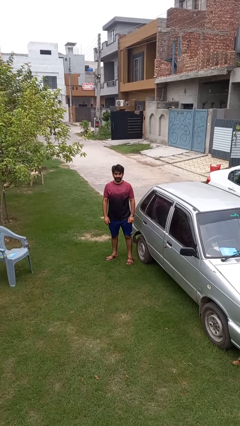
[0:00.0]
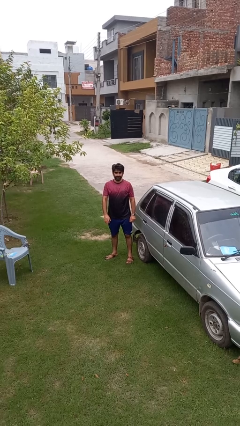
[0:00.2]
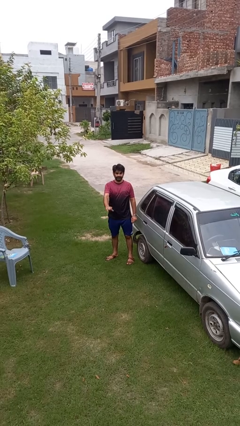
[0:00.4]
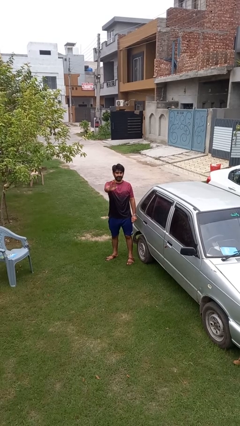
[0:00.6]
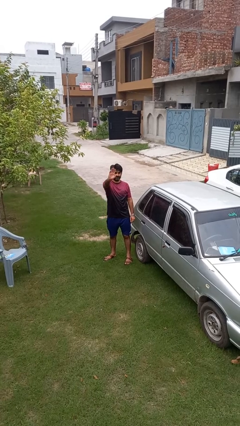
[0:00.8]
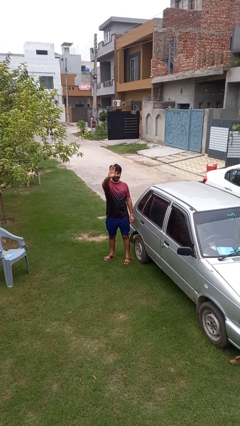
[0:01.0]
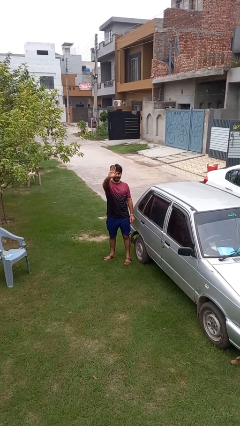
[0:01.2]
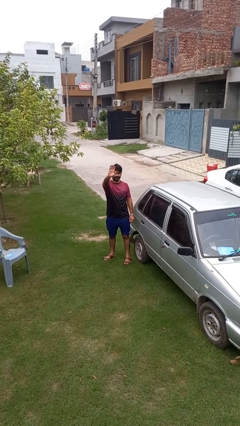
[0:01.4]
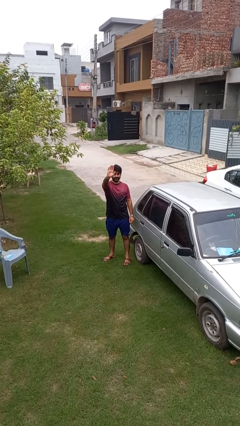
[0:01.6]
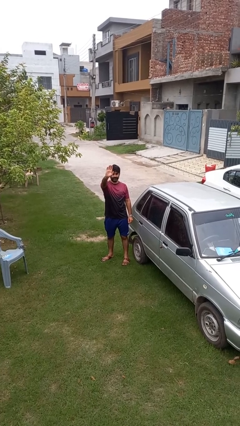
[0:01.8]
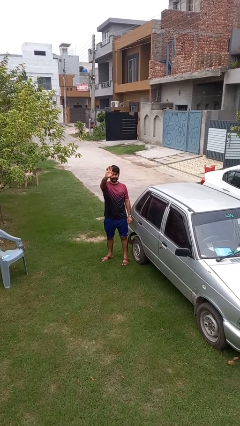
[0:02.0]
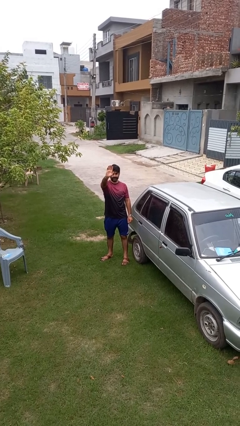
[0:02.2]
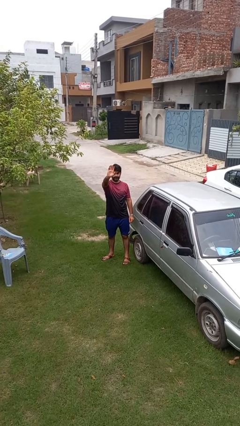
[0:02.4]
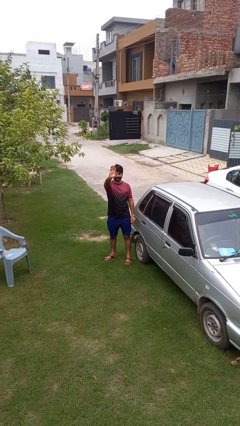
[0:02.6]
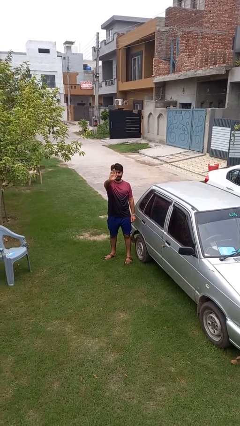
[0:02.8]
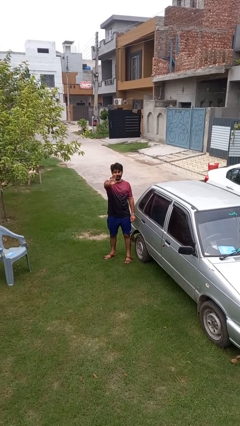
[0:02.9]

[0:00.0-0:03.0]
person gestures raise hand

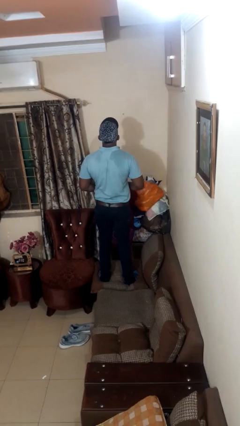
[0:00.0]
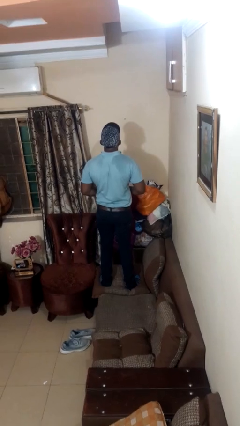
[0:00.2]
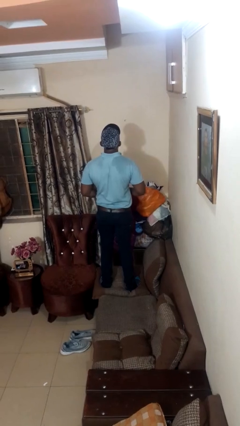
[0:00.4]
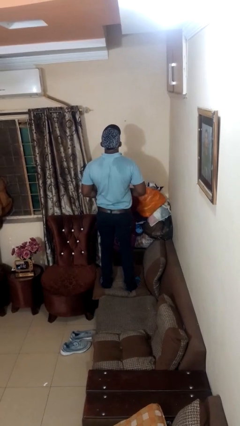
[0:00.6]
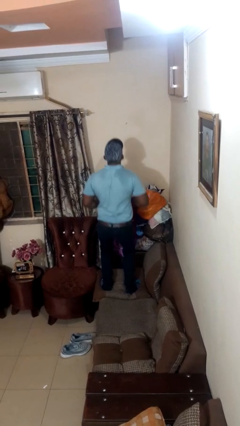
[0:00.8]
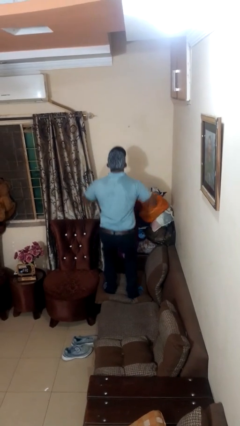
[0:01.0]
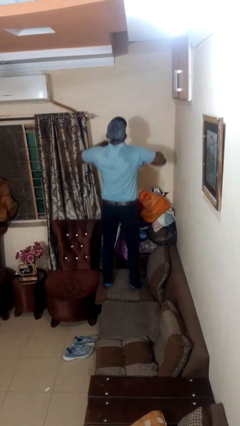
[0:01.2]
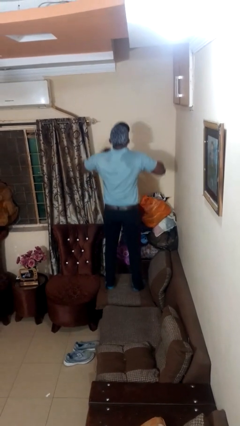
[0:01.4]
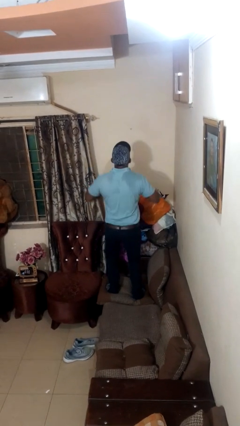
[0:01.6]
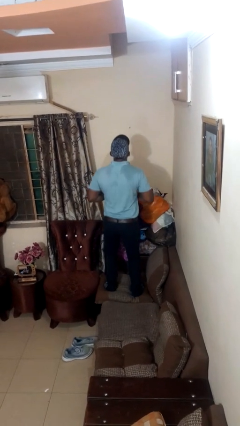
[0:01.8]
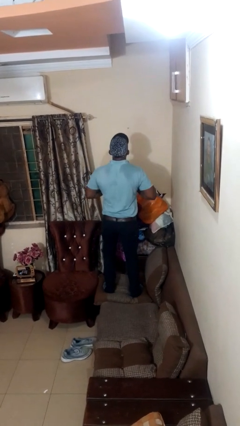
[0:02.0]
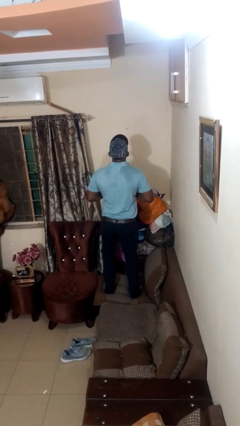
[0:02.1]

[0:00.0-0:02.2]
person jumps on couch

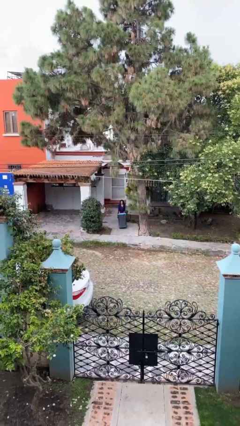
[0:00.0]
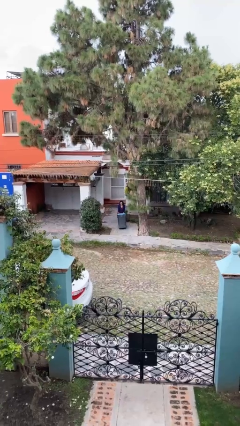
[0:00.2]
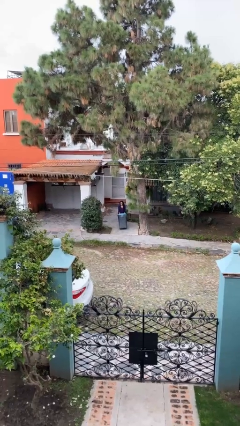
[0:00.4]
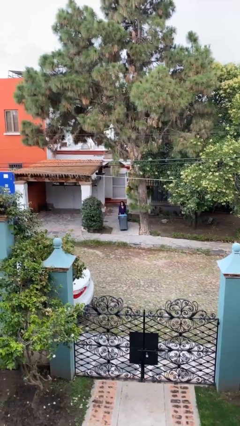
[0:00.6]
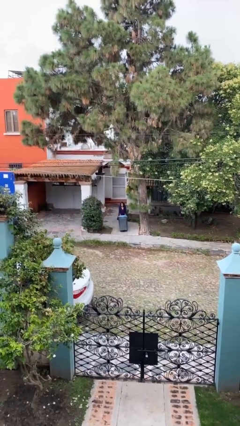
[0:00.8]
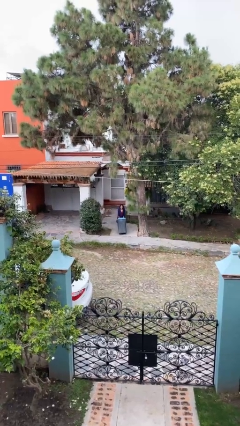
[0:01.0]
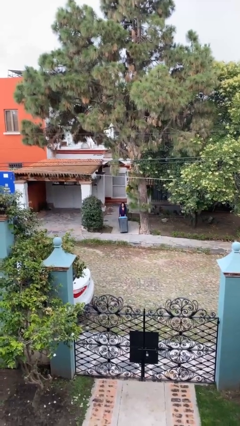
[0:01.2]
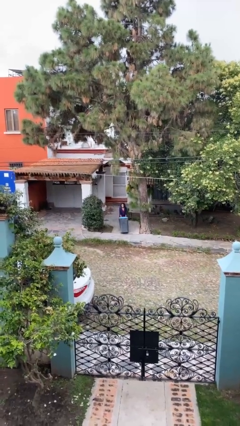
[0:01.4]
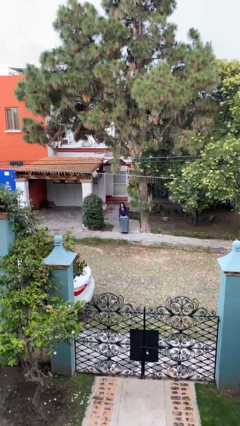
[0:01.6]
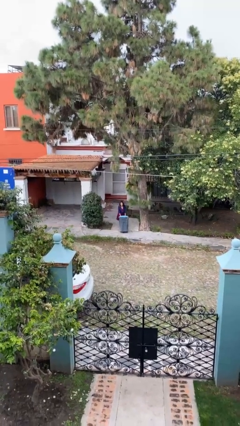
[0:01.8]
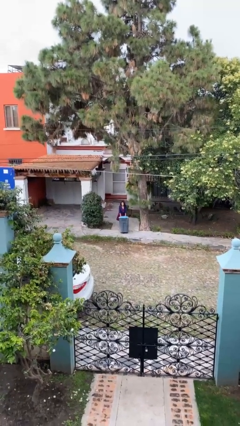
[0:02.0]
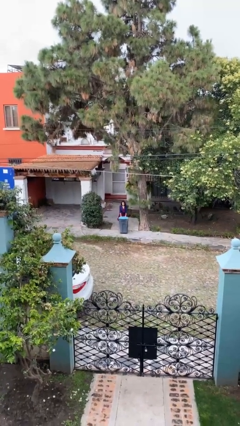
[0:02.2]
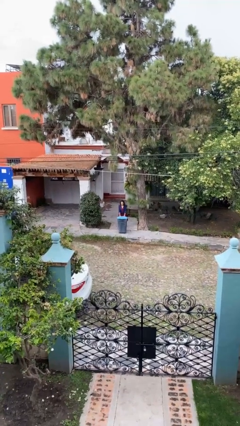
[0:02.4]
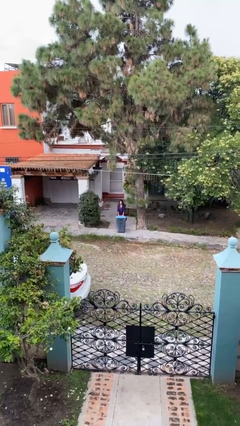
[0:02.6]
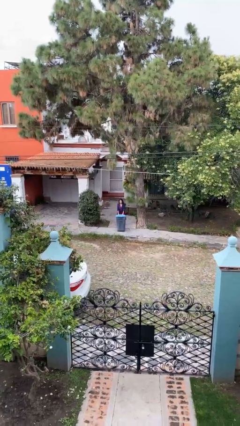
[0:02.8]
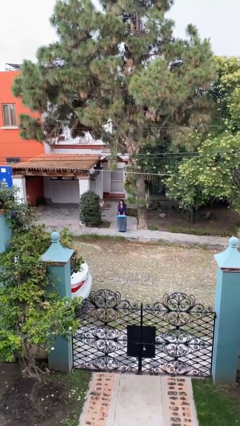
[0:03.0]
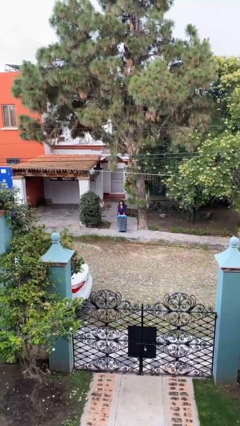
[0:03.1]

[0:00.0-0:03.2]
person pushes wheeled trashcan

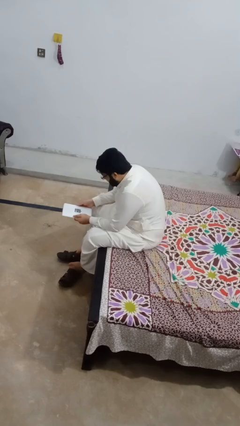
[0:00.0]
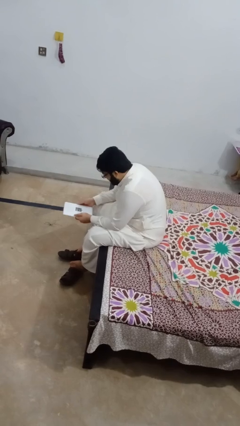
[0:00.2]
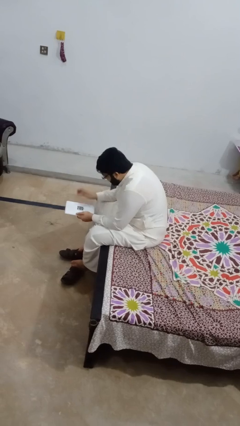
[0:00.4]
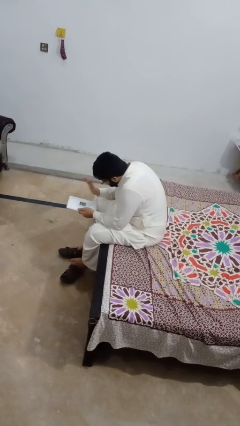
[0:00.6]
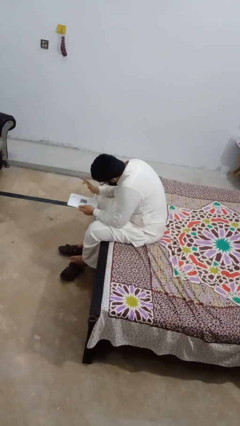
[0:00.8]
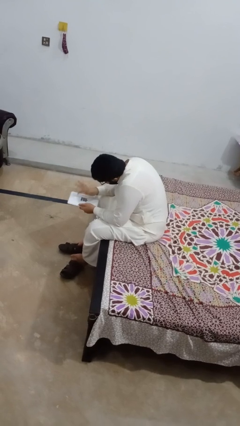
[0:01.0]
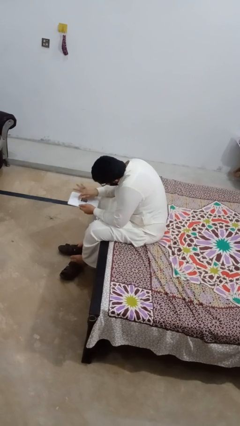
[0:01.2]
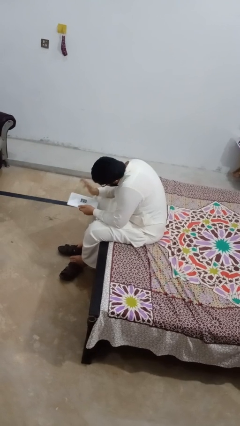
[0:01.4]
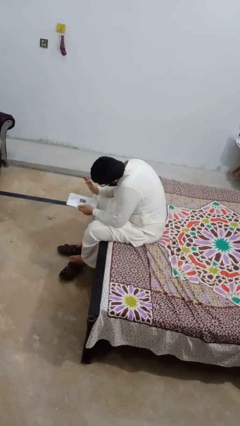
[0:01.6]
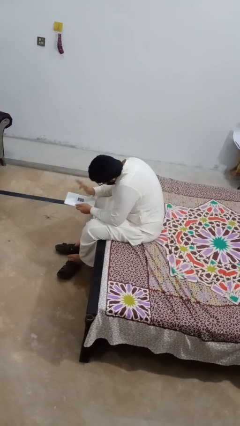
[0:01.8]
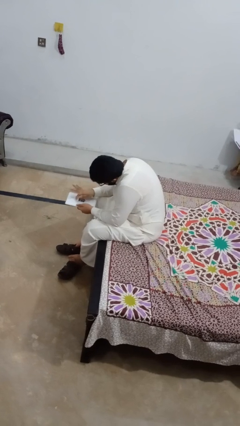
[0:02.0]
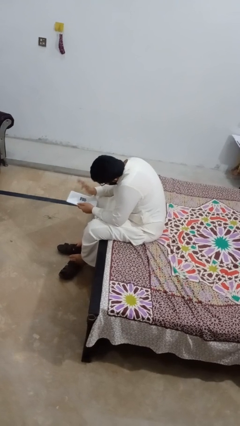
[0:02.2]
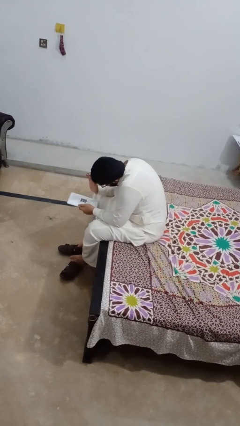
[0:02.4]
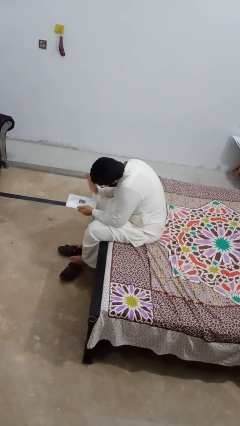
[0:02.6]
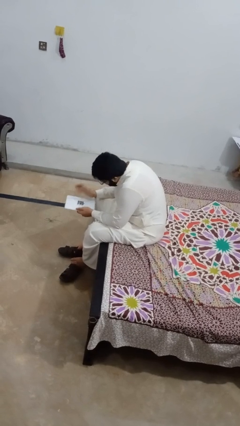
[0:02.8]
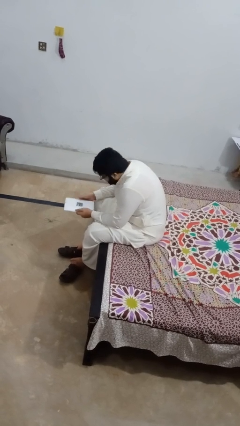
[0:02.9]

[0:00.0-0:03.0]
person taps object with finger

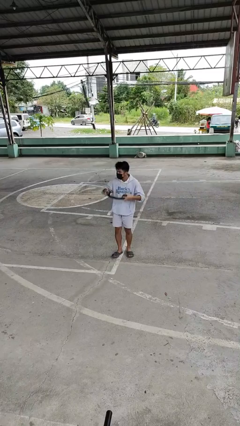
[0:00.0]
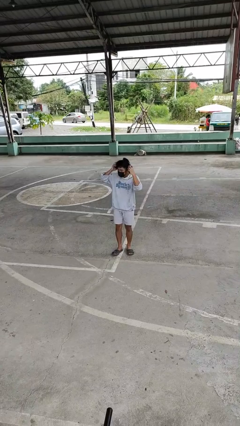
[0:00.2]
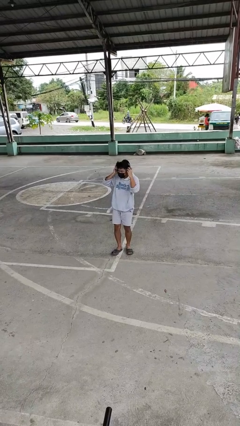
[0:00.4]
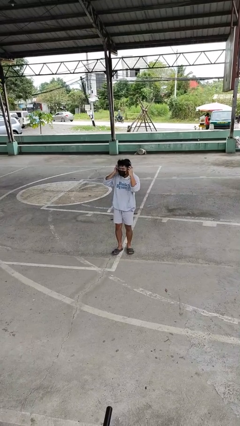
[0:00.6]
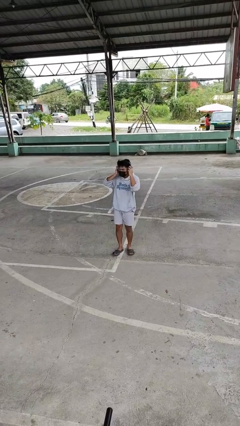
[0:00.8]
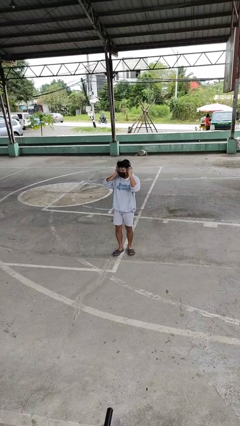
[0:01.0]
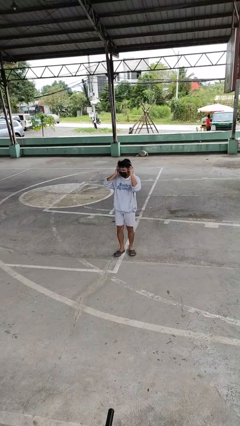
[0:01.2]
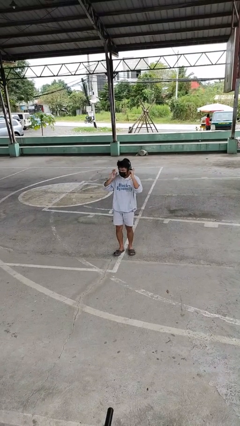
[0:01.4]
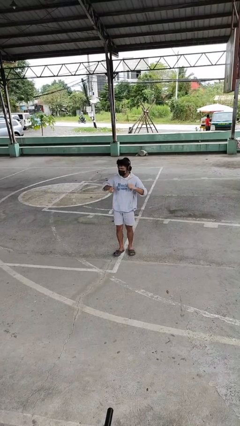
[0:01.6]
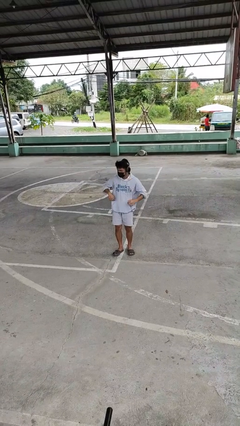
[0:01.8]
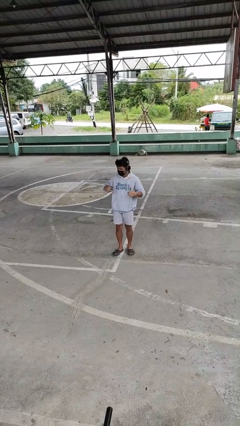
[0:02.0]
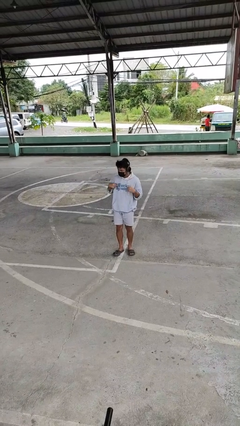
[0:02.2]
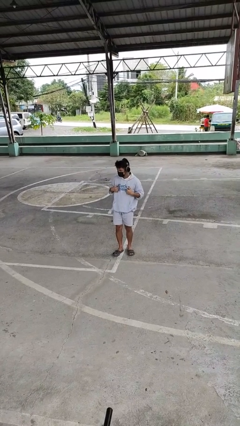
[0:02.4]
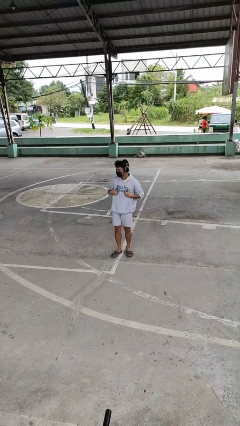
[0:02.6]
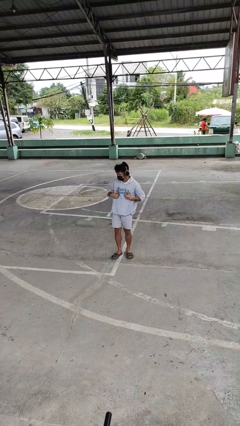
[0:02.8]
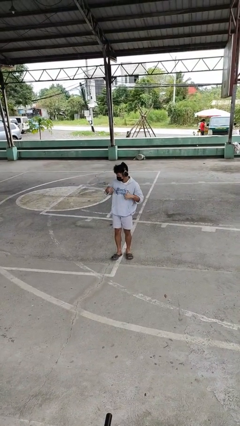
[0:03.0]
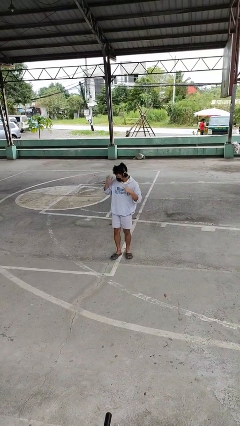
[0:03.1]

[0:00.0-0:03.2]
person puts on headphones

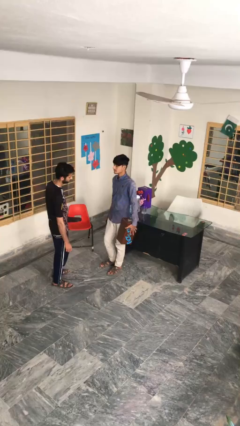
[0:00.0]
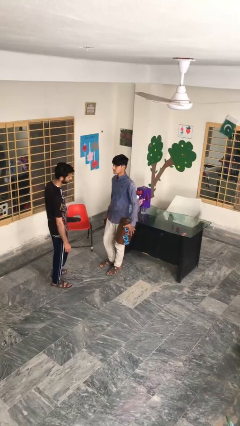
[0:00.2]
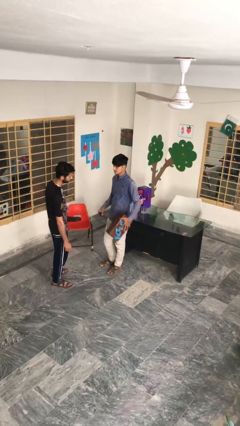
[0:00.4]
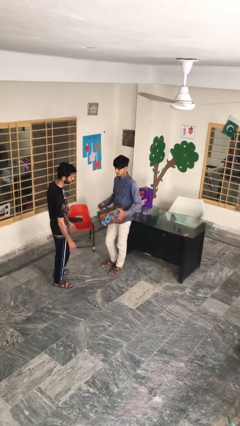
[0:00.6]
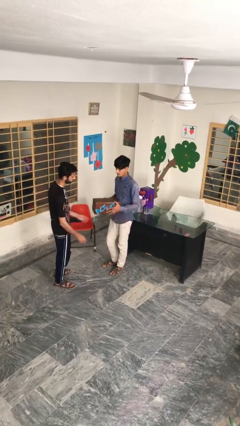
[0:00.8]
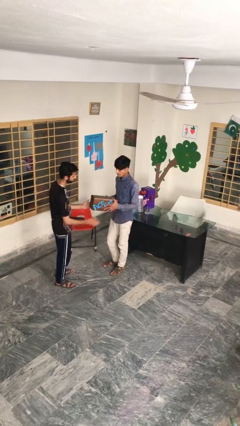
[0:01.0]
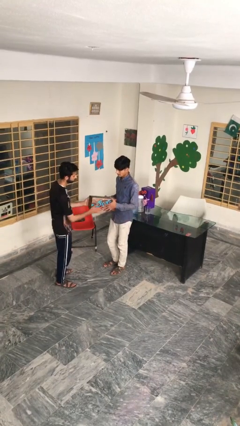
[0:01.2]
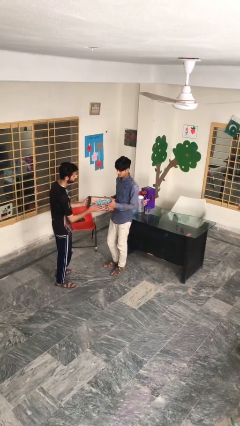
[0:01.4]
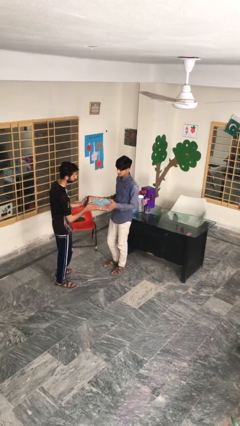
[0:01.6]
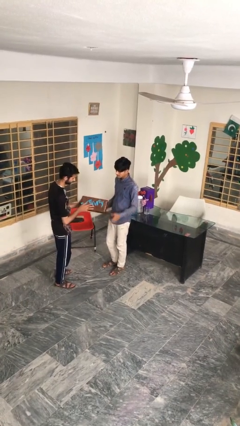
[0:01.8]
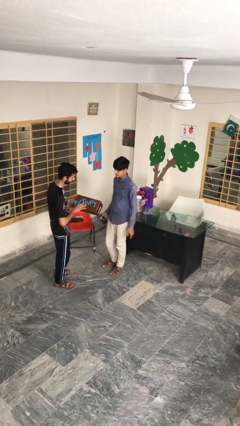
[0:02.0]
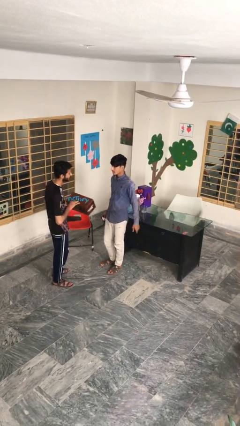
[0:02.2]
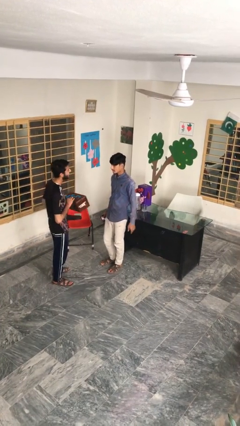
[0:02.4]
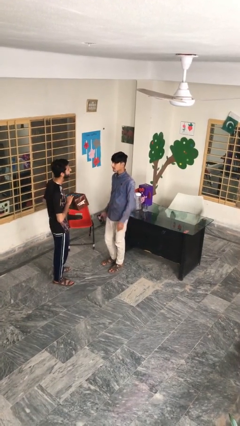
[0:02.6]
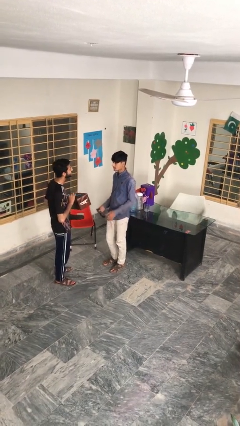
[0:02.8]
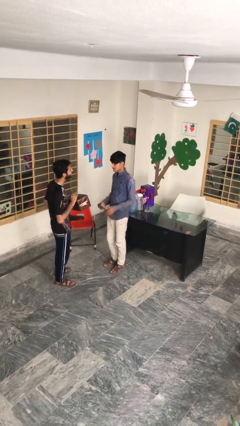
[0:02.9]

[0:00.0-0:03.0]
person transfers object to person
